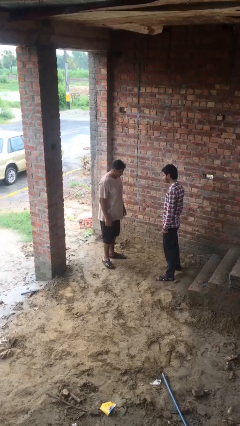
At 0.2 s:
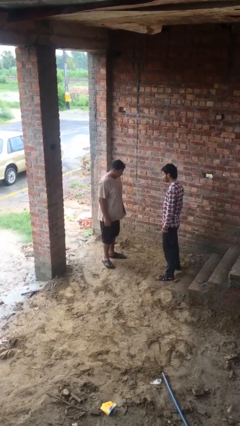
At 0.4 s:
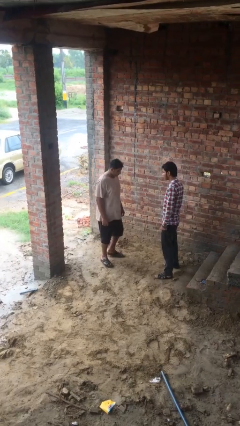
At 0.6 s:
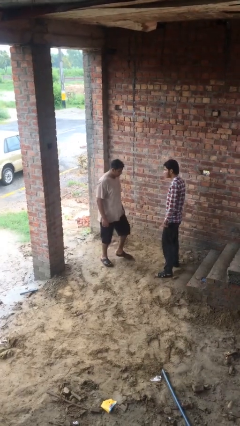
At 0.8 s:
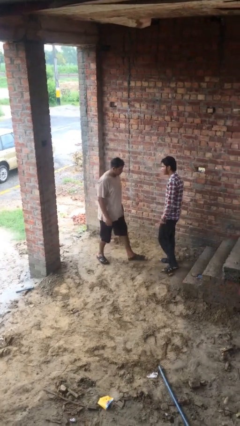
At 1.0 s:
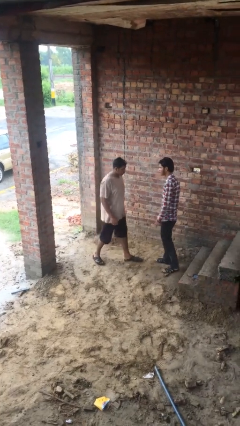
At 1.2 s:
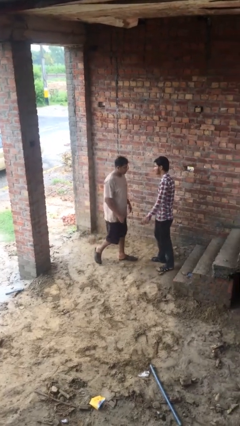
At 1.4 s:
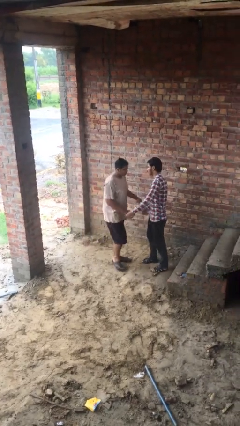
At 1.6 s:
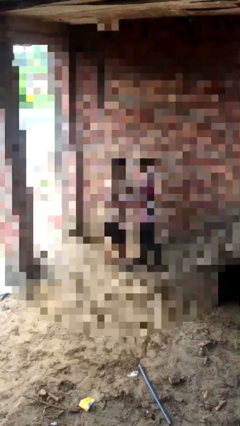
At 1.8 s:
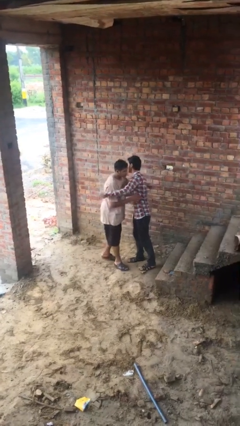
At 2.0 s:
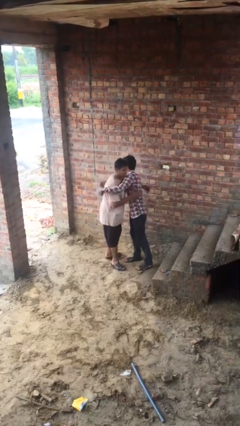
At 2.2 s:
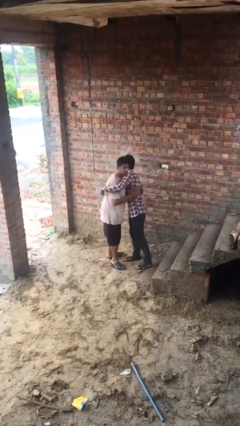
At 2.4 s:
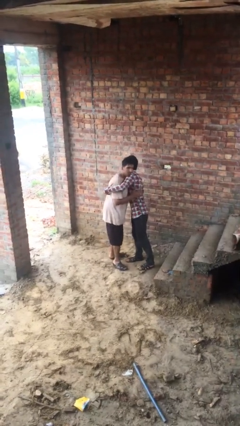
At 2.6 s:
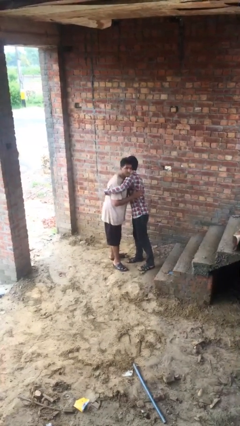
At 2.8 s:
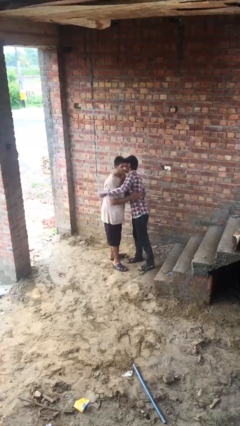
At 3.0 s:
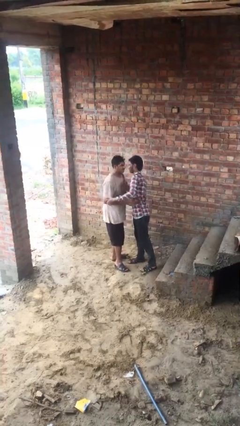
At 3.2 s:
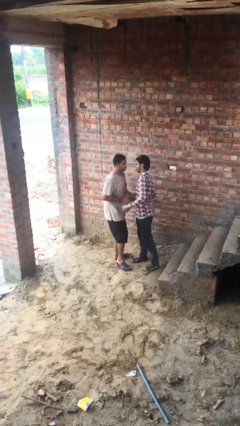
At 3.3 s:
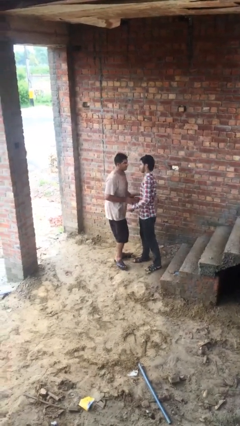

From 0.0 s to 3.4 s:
person embraces person

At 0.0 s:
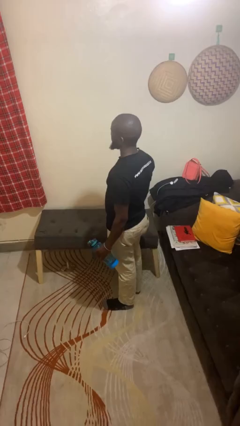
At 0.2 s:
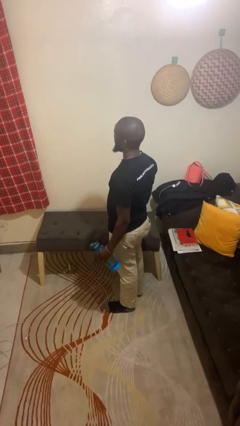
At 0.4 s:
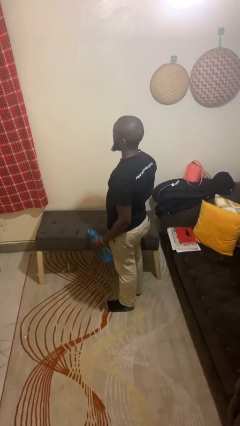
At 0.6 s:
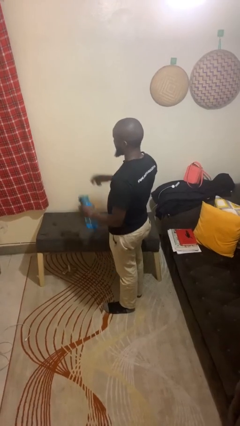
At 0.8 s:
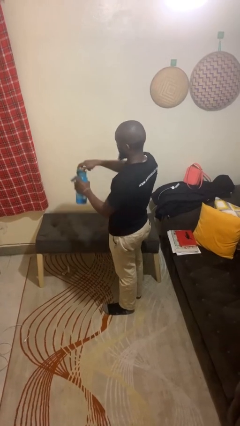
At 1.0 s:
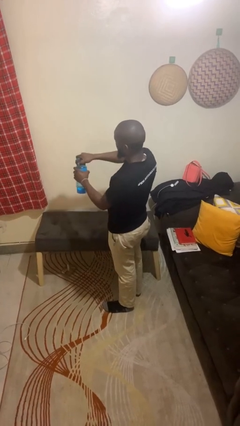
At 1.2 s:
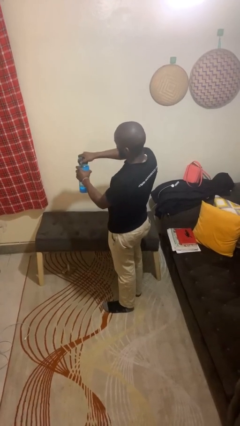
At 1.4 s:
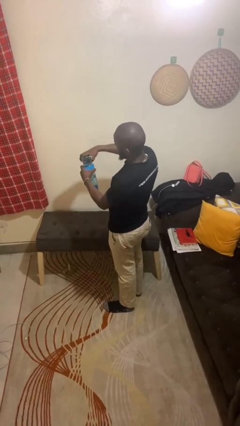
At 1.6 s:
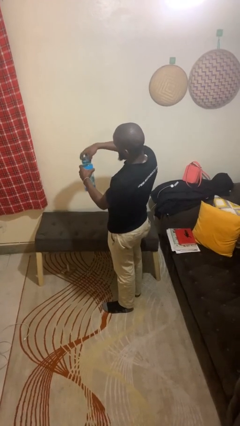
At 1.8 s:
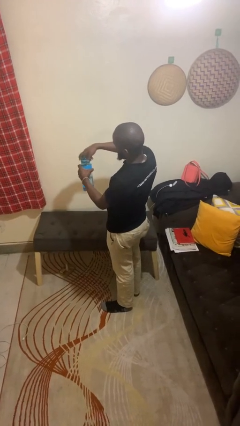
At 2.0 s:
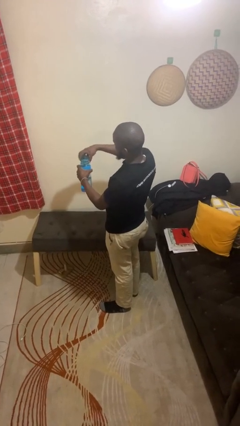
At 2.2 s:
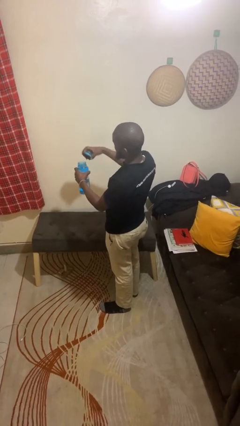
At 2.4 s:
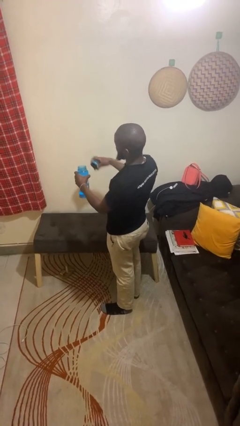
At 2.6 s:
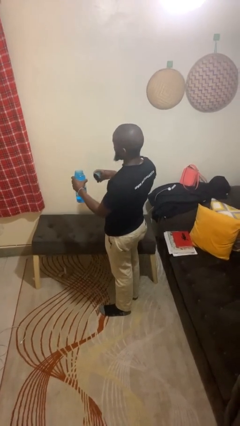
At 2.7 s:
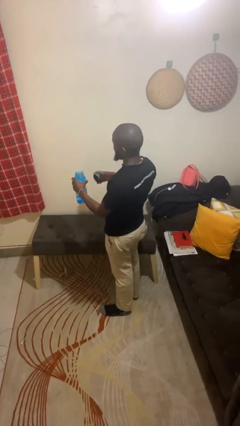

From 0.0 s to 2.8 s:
person opens jar

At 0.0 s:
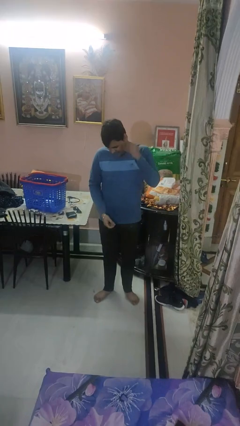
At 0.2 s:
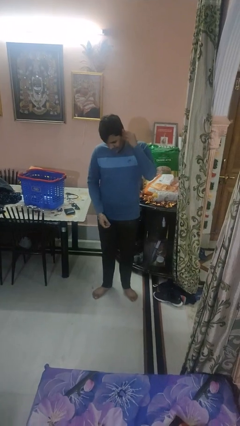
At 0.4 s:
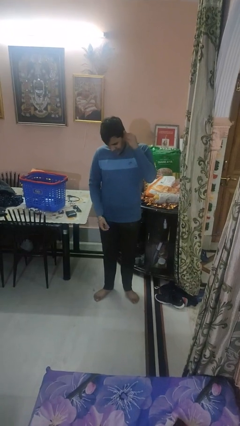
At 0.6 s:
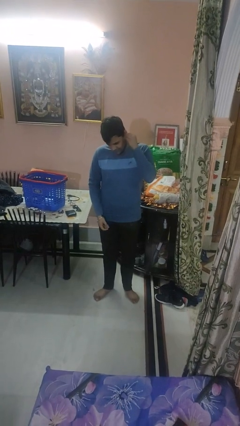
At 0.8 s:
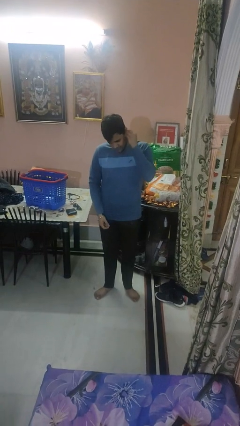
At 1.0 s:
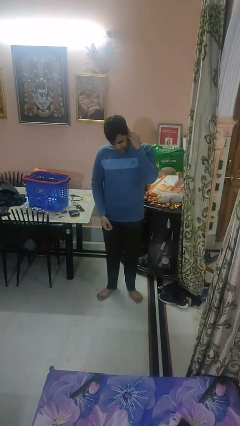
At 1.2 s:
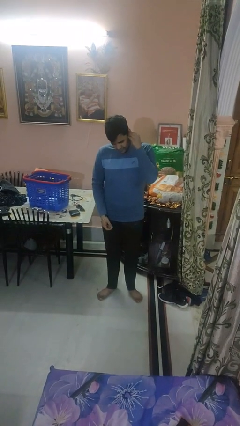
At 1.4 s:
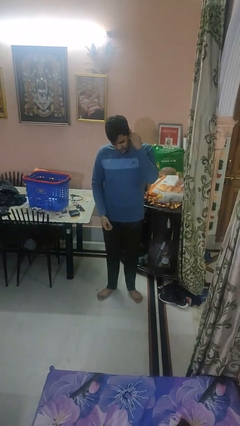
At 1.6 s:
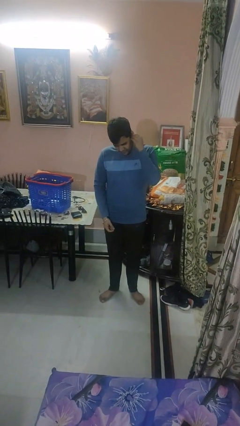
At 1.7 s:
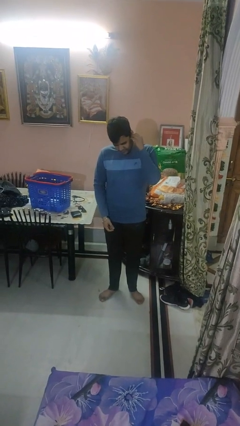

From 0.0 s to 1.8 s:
person puts on earrings

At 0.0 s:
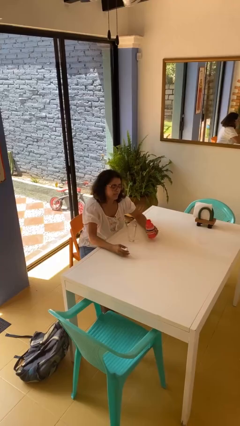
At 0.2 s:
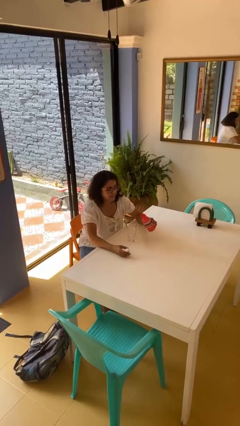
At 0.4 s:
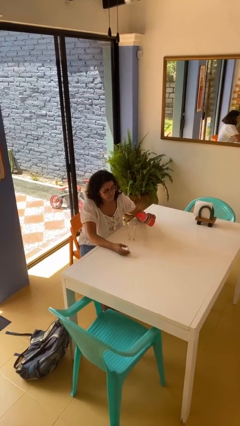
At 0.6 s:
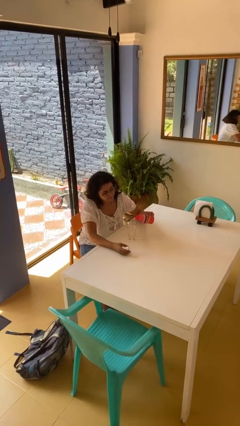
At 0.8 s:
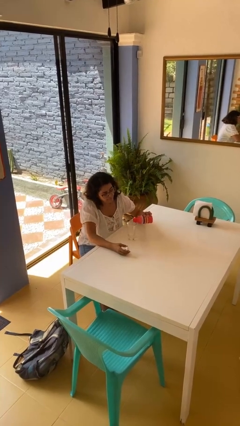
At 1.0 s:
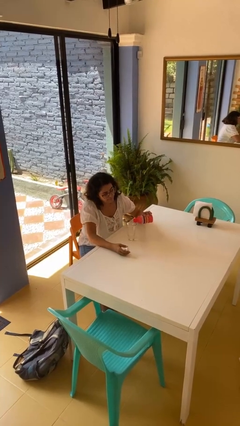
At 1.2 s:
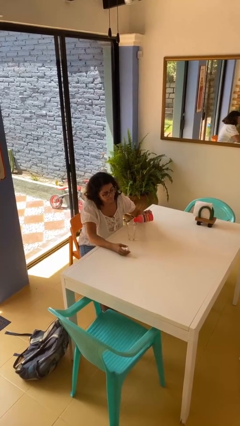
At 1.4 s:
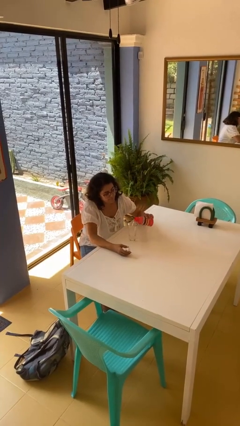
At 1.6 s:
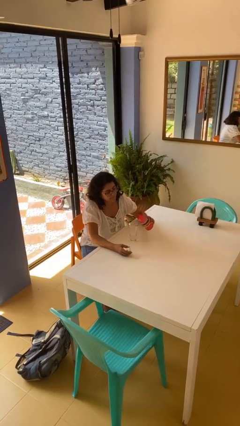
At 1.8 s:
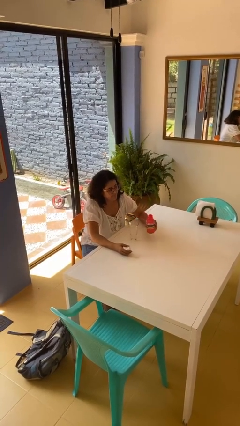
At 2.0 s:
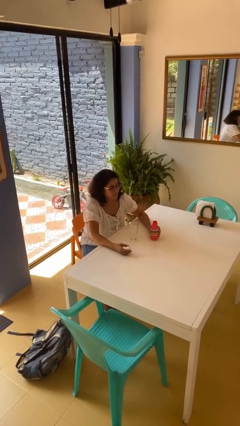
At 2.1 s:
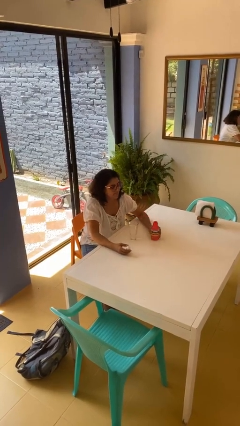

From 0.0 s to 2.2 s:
person pours liquid into cup

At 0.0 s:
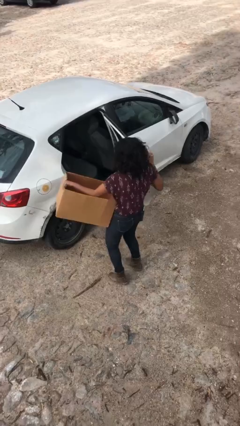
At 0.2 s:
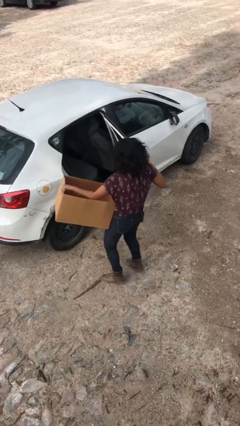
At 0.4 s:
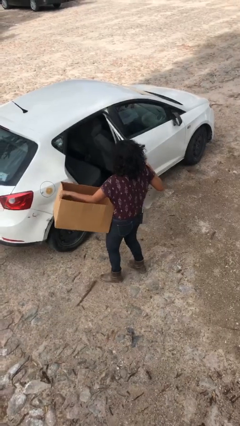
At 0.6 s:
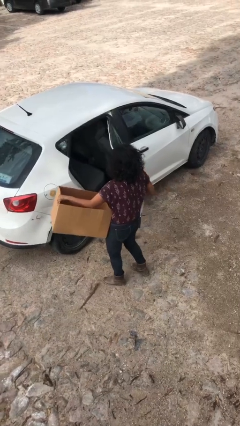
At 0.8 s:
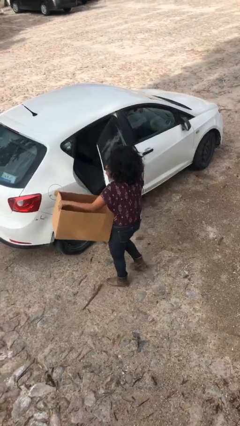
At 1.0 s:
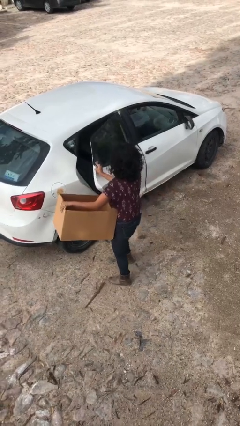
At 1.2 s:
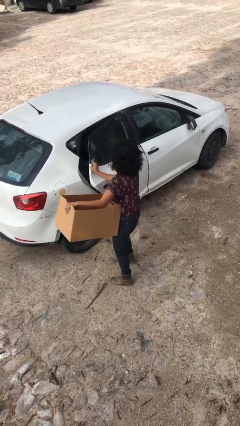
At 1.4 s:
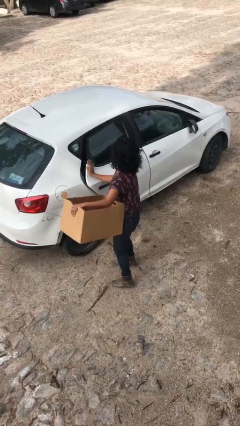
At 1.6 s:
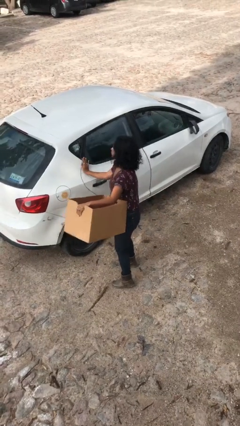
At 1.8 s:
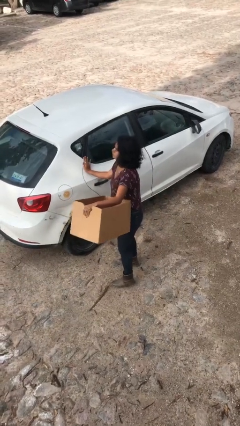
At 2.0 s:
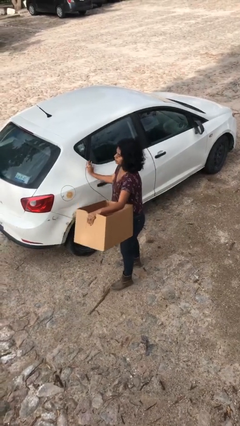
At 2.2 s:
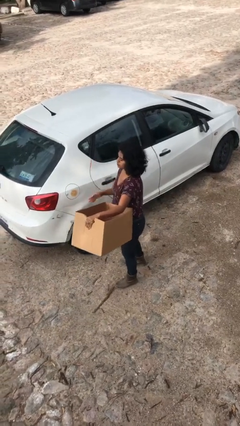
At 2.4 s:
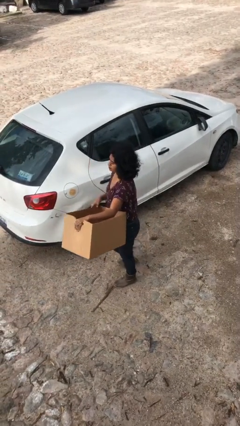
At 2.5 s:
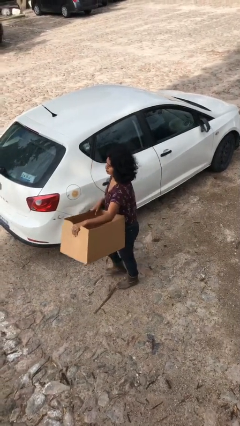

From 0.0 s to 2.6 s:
person closes car door

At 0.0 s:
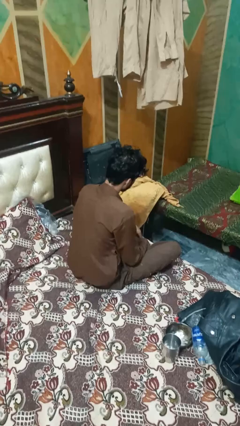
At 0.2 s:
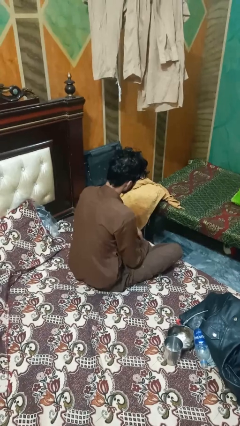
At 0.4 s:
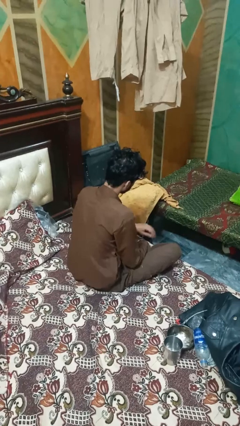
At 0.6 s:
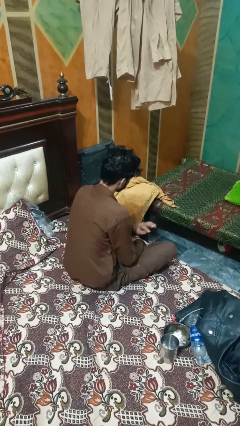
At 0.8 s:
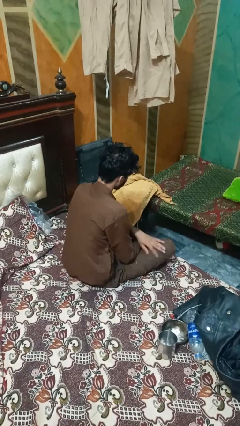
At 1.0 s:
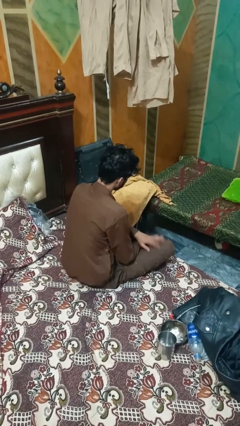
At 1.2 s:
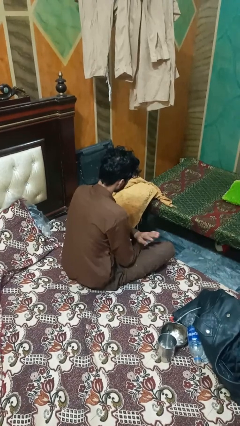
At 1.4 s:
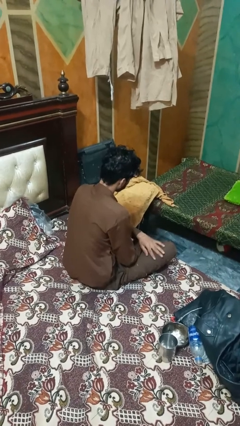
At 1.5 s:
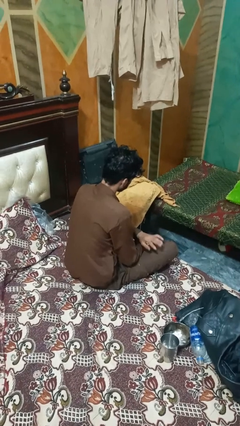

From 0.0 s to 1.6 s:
person slaps hands on thighs

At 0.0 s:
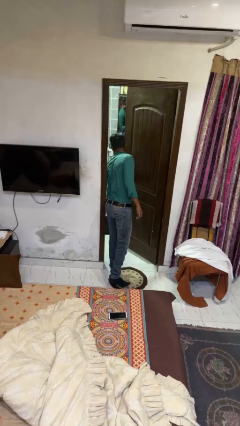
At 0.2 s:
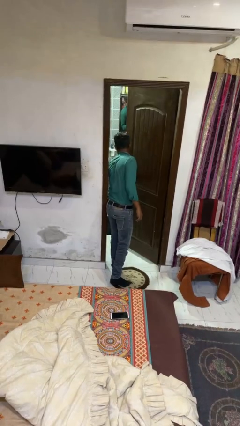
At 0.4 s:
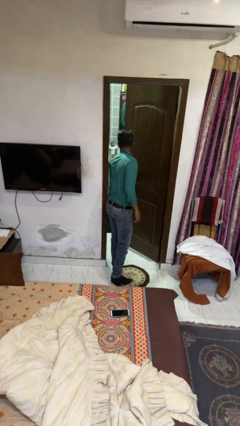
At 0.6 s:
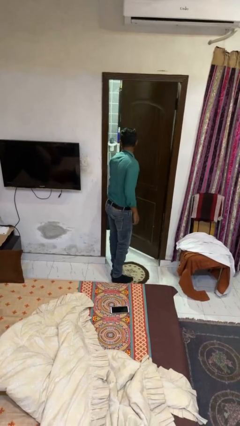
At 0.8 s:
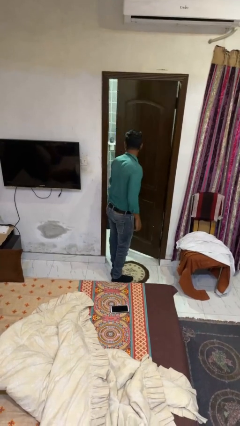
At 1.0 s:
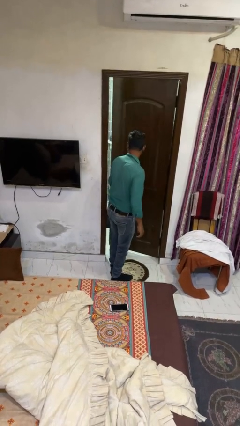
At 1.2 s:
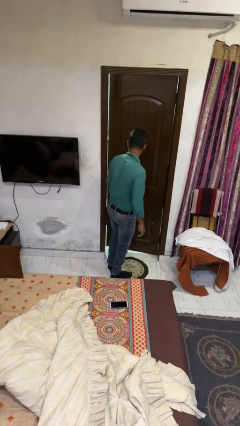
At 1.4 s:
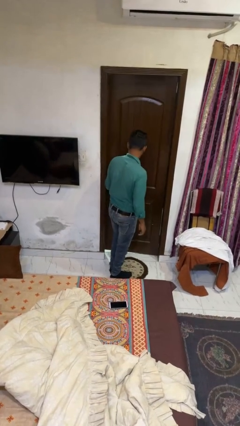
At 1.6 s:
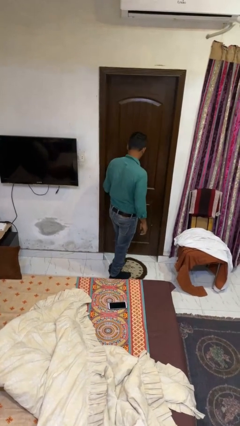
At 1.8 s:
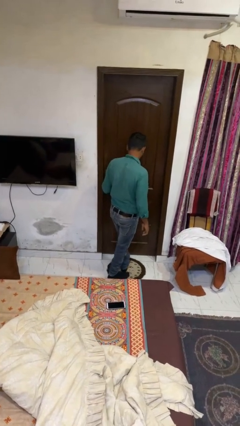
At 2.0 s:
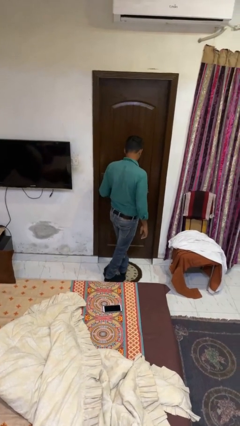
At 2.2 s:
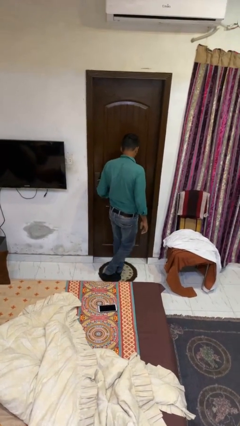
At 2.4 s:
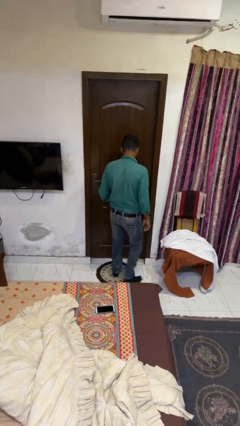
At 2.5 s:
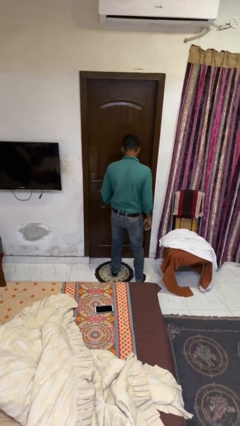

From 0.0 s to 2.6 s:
person closes facility door
